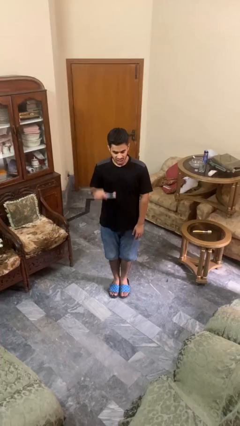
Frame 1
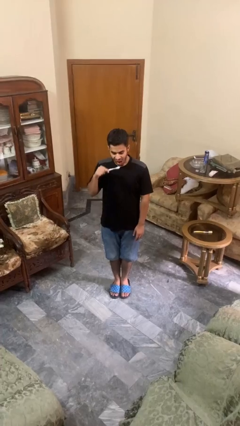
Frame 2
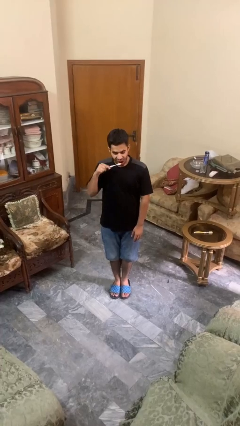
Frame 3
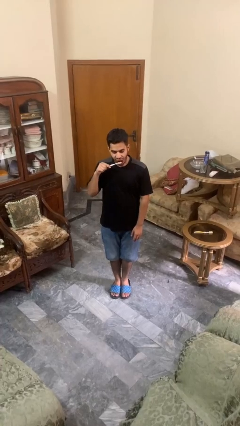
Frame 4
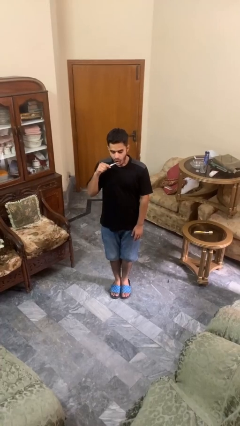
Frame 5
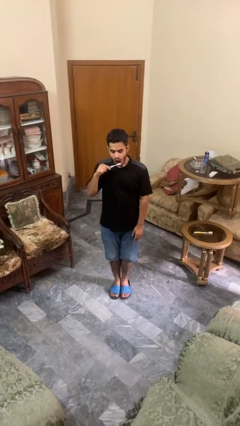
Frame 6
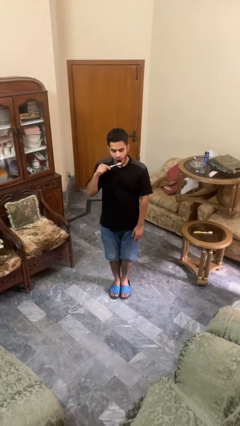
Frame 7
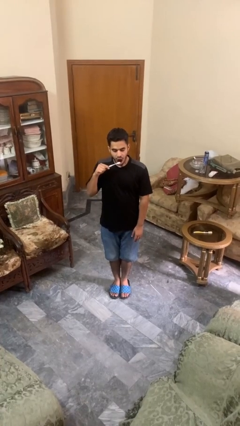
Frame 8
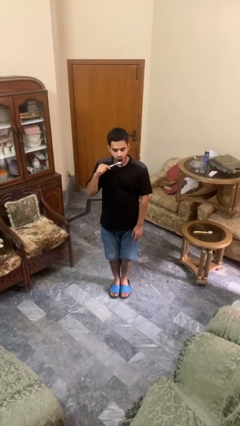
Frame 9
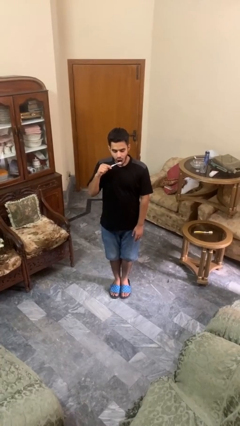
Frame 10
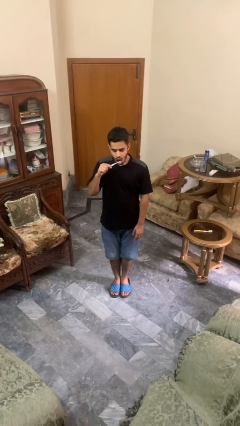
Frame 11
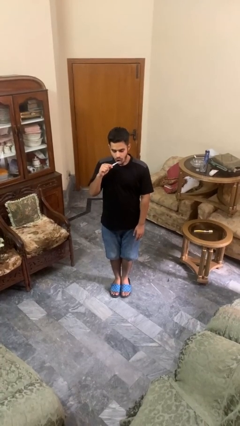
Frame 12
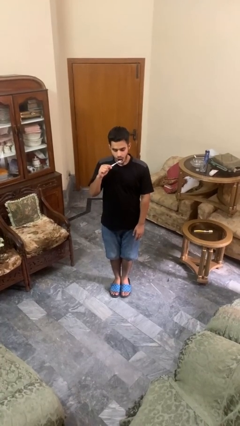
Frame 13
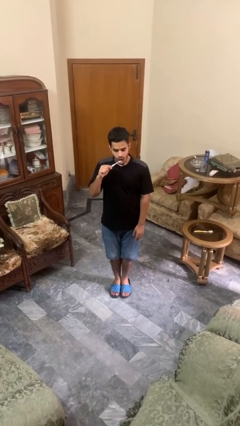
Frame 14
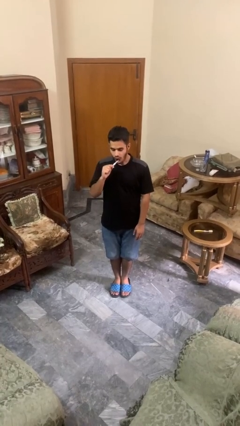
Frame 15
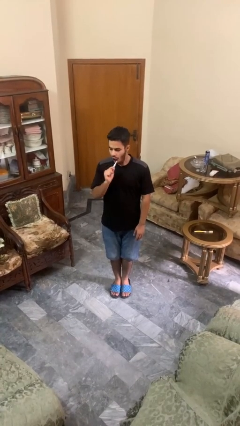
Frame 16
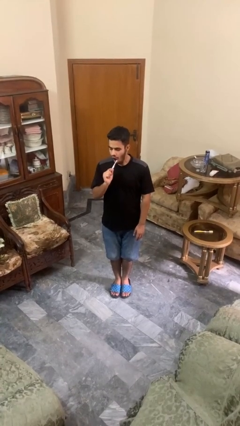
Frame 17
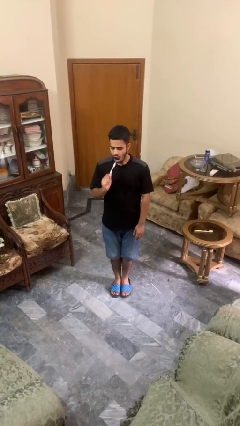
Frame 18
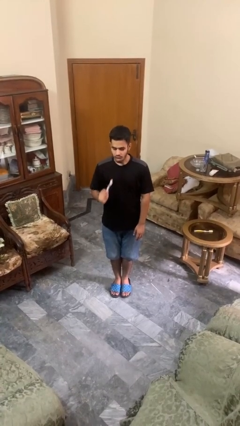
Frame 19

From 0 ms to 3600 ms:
person brushes teeth

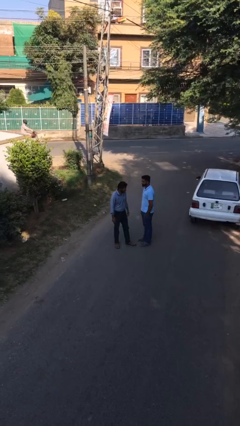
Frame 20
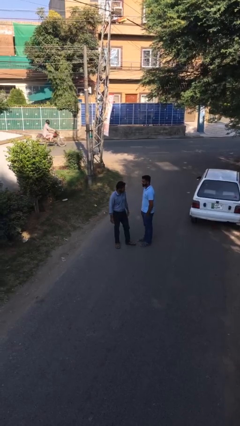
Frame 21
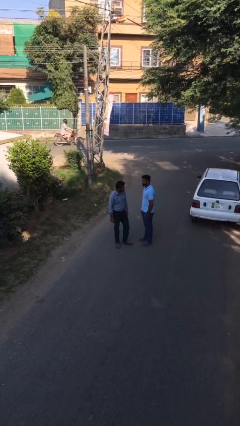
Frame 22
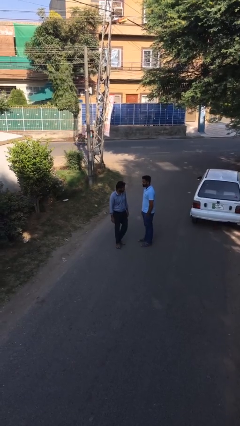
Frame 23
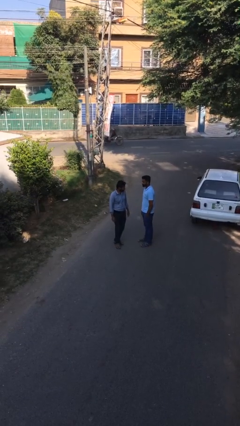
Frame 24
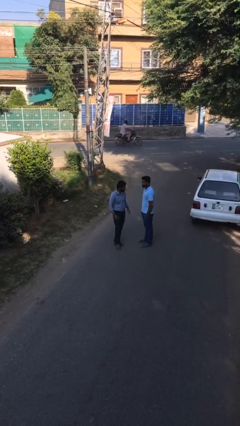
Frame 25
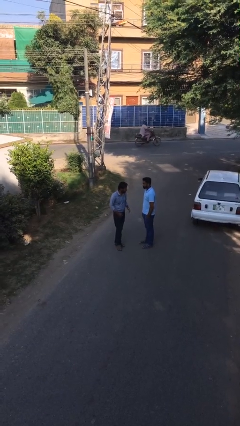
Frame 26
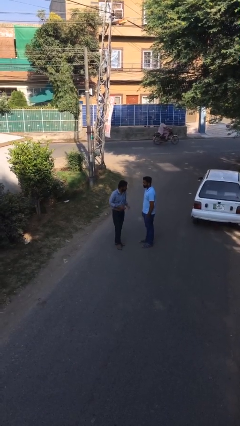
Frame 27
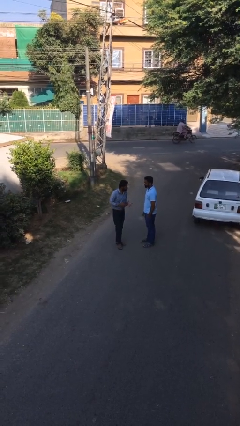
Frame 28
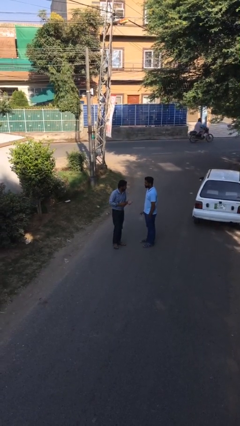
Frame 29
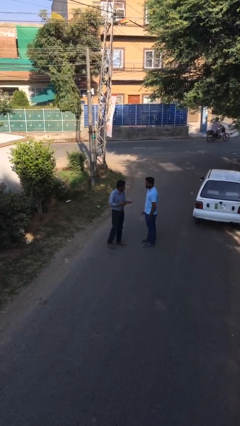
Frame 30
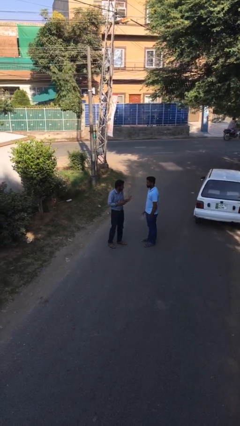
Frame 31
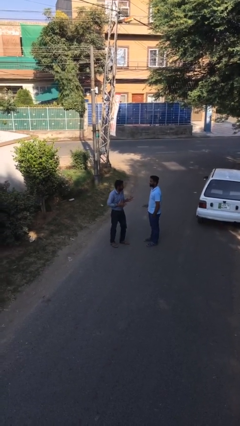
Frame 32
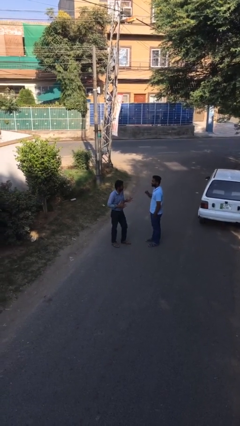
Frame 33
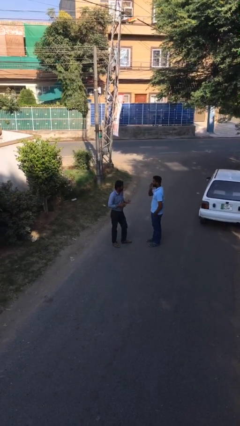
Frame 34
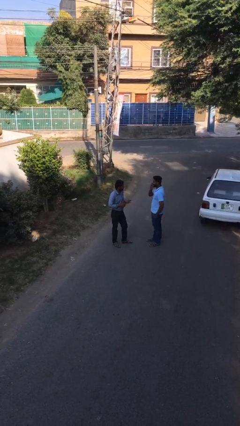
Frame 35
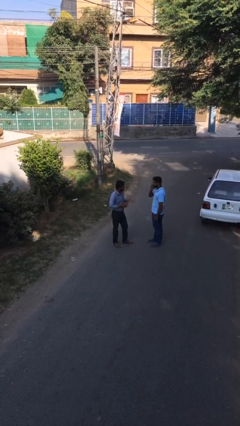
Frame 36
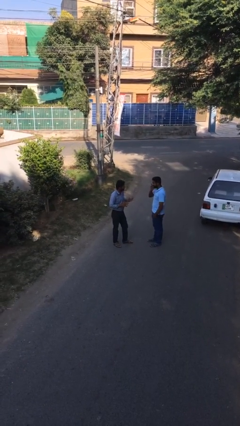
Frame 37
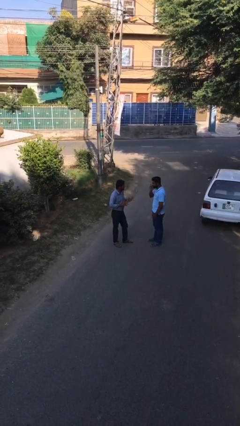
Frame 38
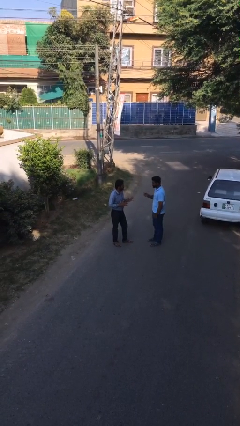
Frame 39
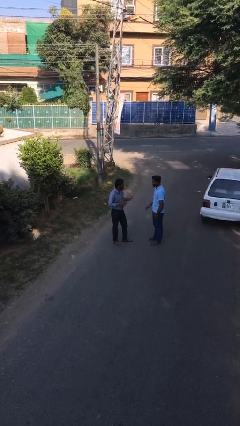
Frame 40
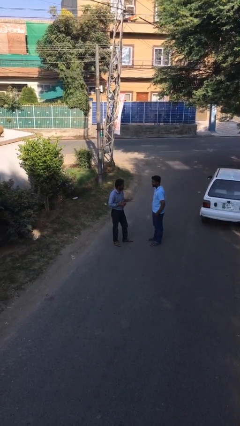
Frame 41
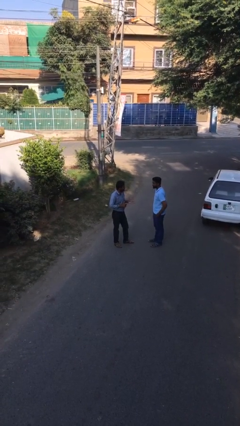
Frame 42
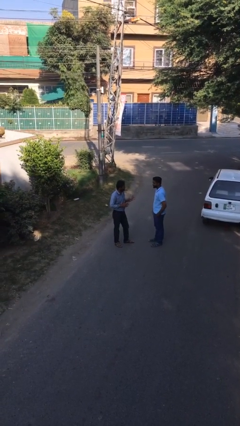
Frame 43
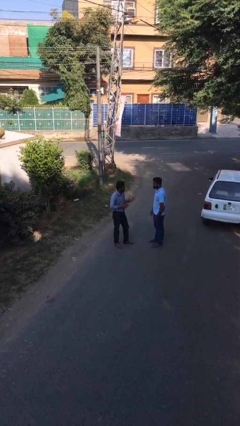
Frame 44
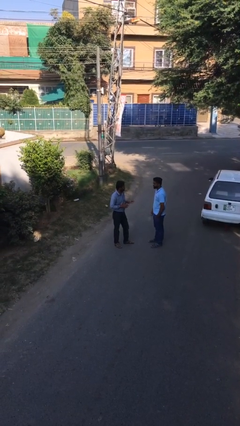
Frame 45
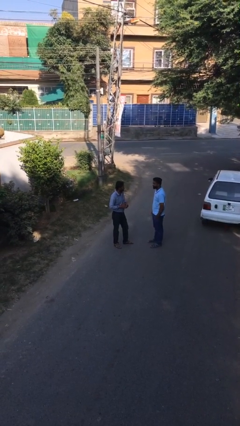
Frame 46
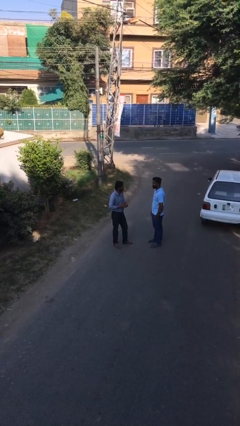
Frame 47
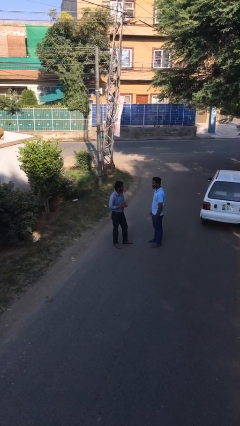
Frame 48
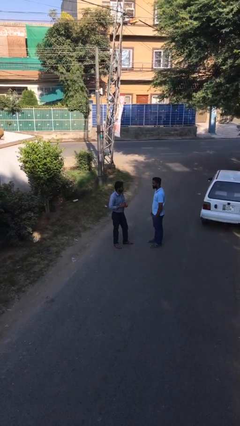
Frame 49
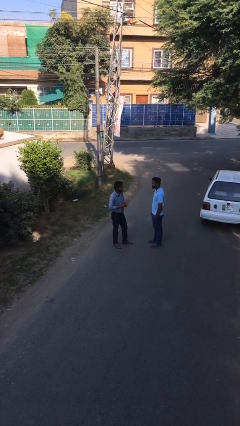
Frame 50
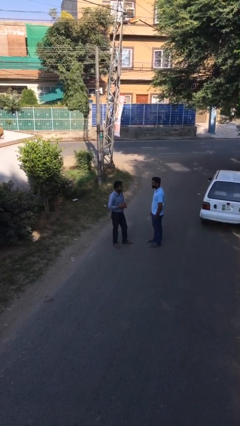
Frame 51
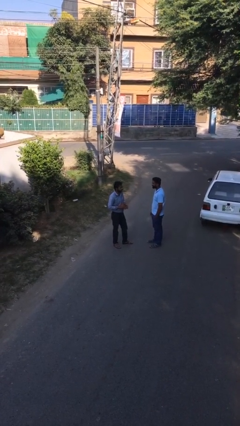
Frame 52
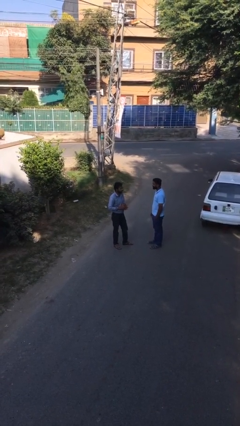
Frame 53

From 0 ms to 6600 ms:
person talks to person

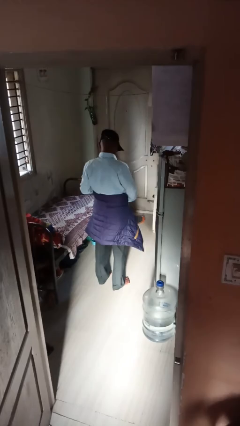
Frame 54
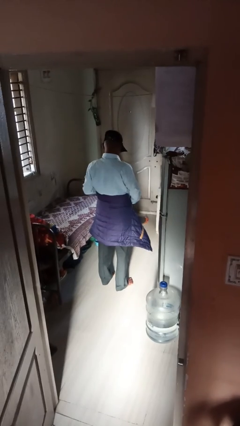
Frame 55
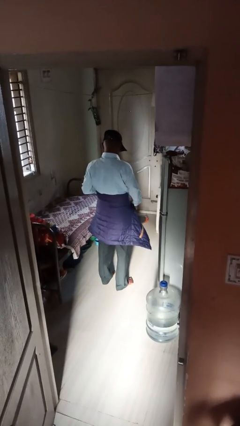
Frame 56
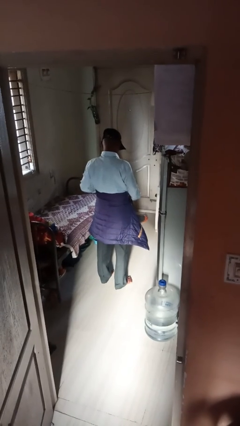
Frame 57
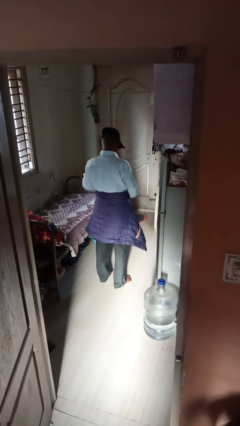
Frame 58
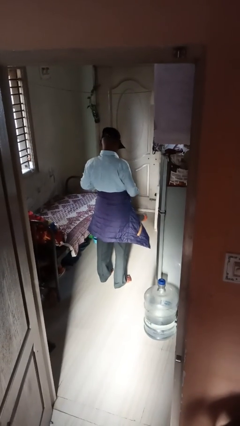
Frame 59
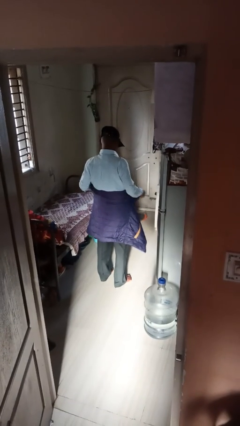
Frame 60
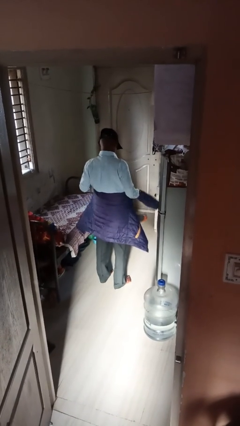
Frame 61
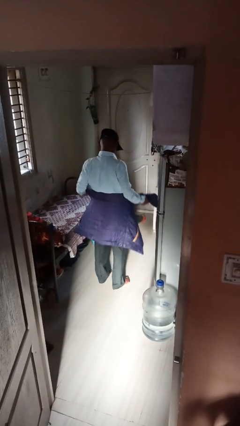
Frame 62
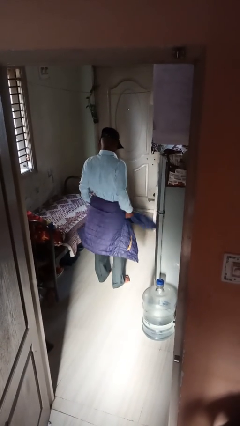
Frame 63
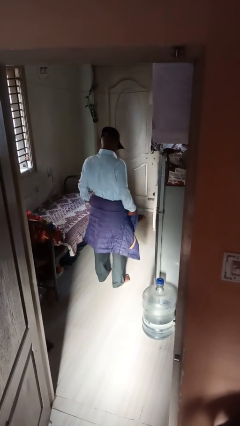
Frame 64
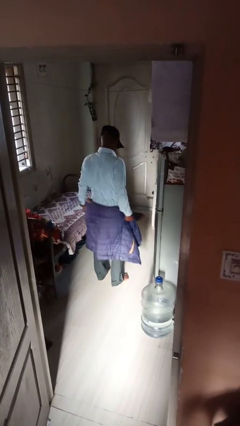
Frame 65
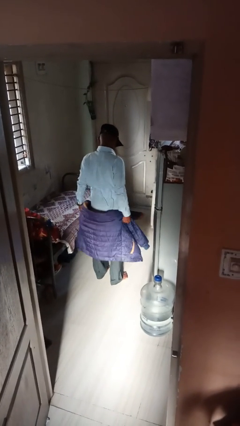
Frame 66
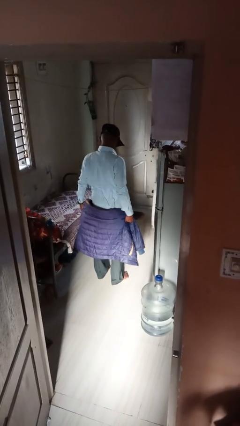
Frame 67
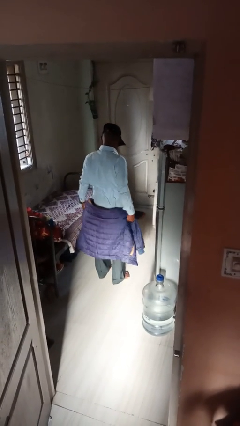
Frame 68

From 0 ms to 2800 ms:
person unties jacket around waist

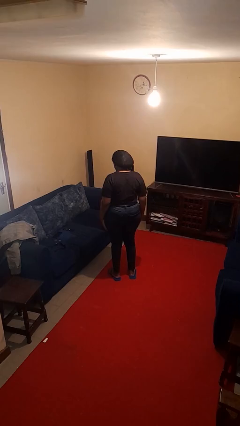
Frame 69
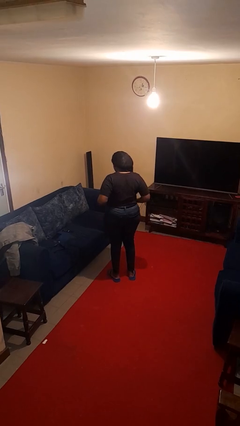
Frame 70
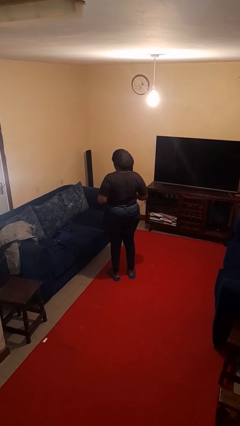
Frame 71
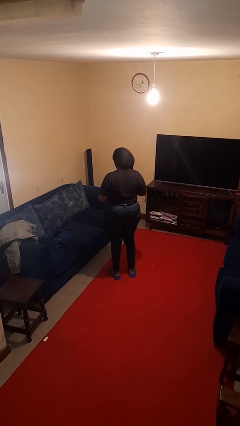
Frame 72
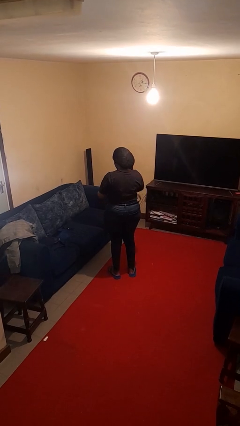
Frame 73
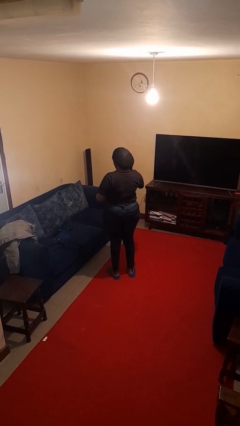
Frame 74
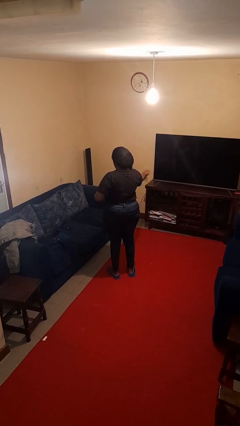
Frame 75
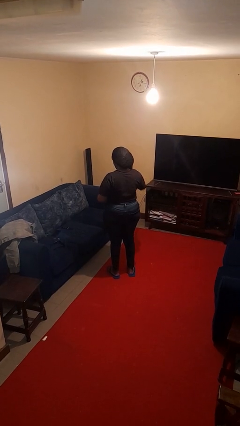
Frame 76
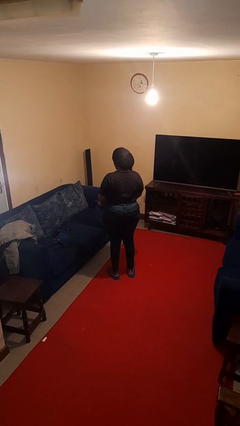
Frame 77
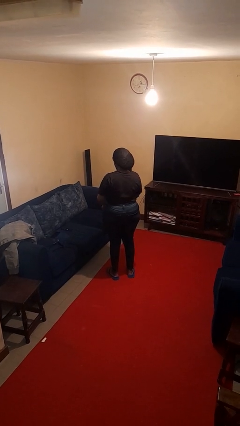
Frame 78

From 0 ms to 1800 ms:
person takes off belt

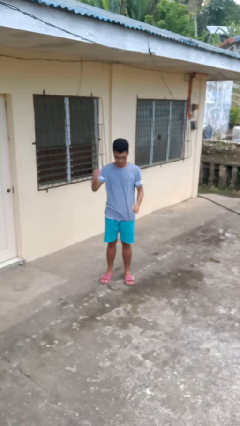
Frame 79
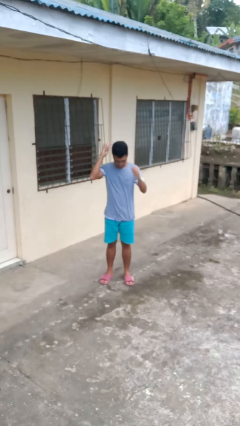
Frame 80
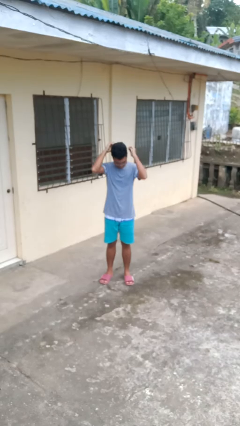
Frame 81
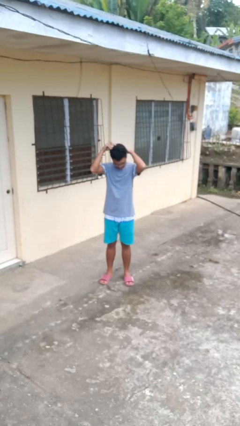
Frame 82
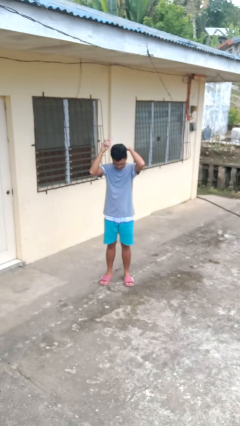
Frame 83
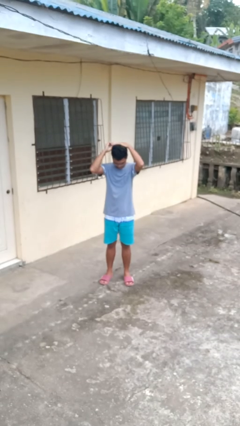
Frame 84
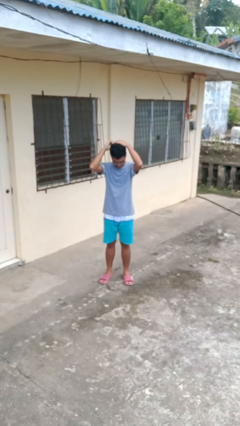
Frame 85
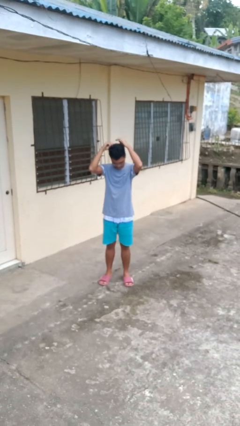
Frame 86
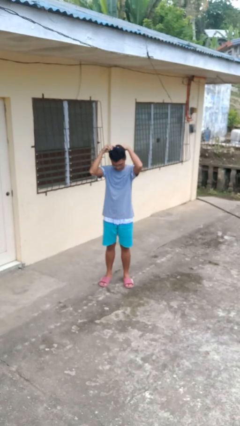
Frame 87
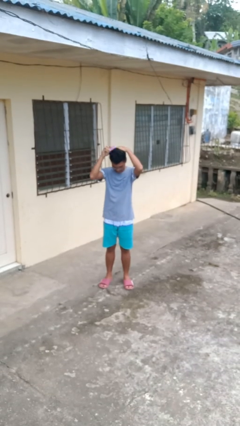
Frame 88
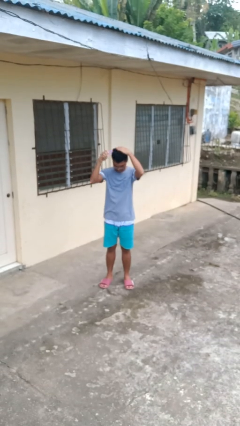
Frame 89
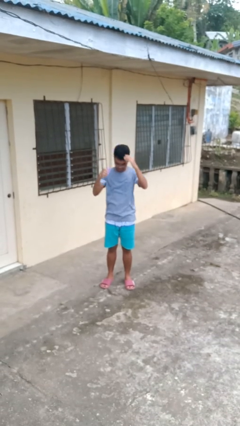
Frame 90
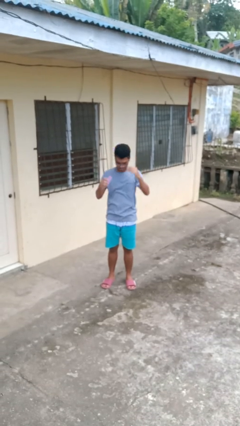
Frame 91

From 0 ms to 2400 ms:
person brushes hair

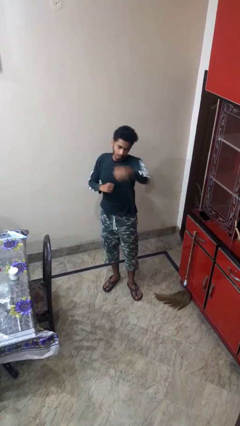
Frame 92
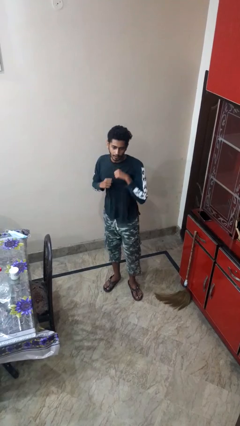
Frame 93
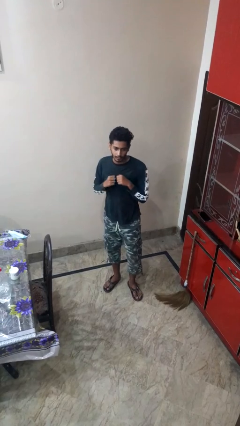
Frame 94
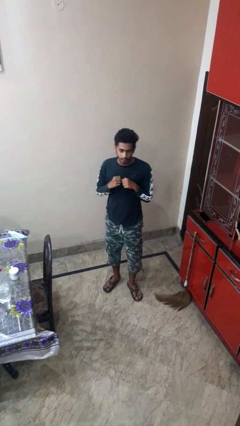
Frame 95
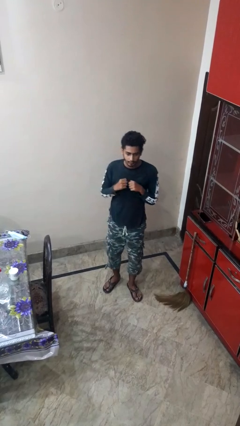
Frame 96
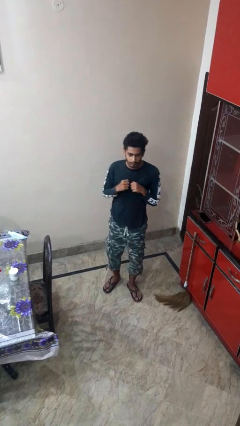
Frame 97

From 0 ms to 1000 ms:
person punches
